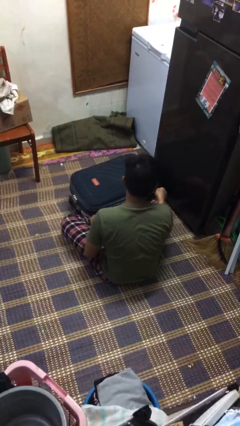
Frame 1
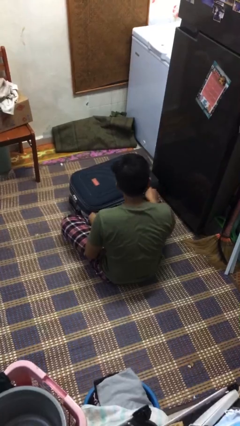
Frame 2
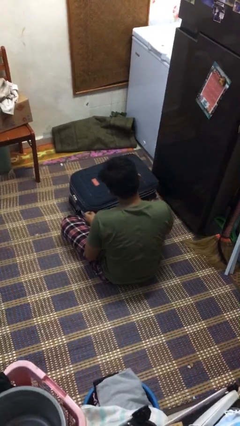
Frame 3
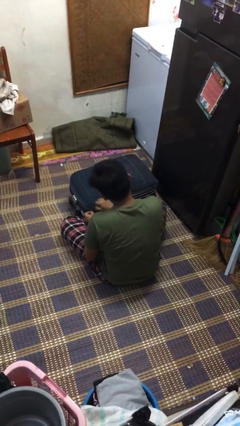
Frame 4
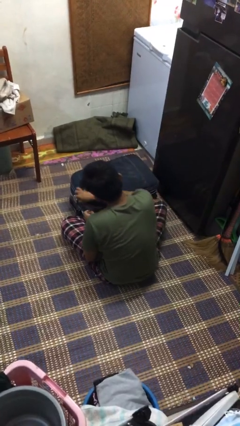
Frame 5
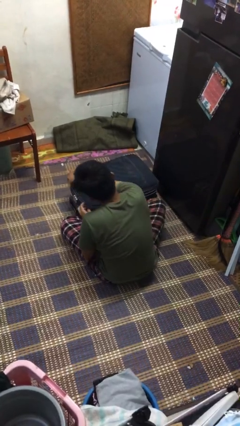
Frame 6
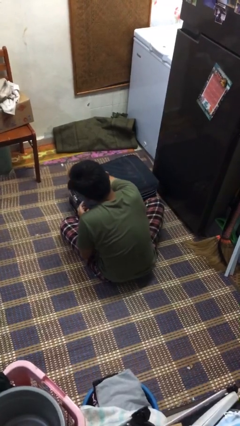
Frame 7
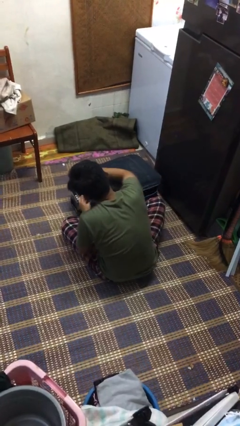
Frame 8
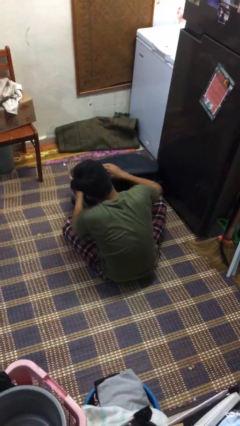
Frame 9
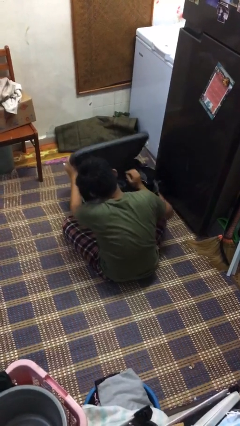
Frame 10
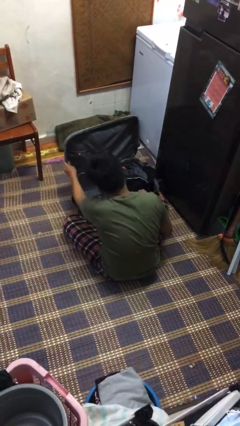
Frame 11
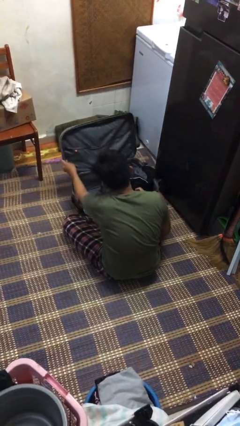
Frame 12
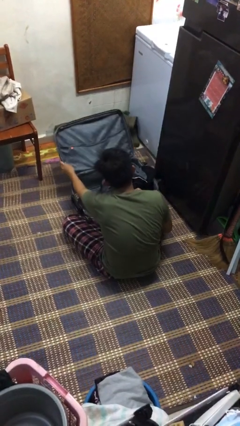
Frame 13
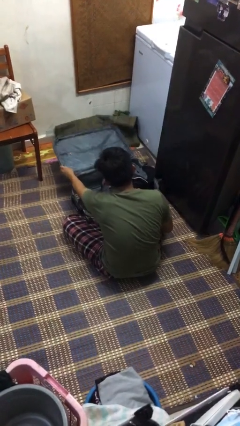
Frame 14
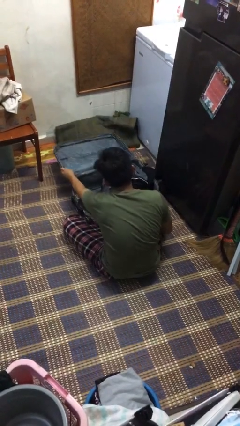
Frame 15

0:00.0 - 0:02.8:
person opens suitcase

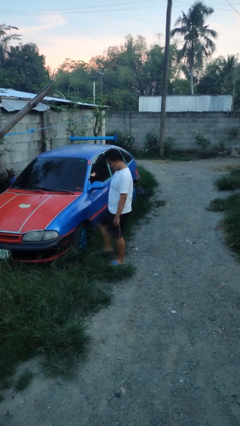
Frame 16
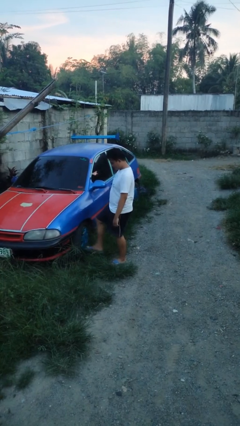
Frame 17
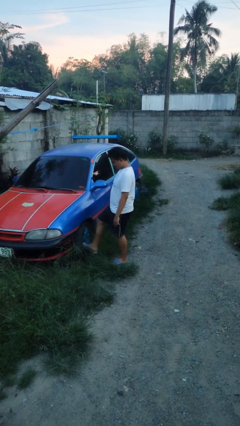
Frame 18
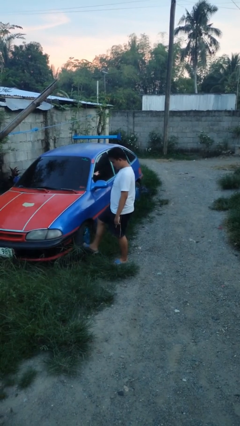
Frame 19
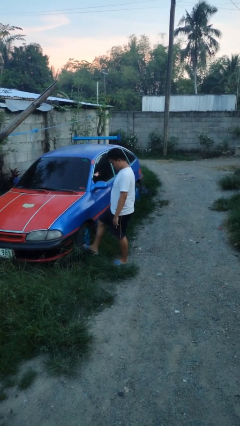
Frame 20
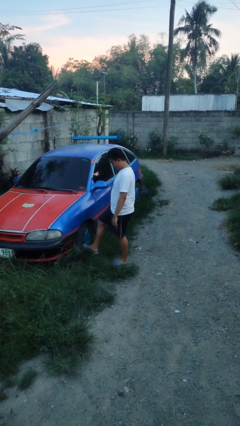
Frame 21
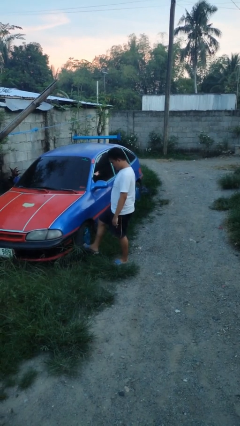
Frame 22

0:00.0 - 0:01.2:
person kicks car tires

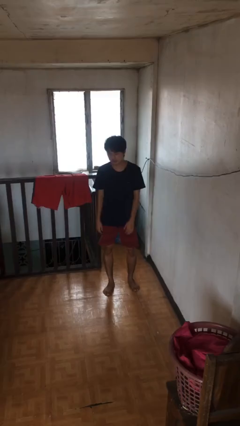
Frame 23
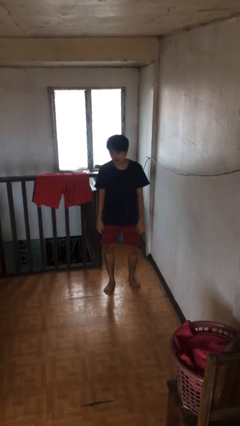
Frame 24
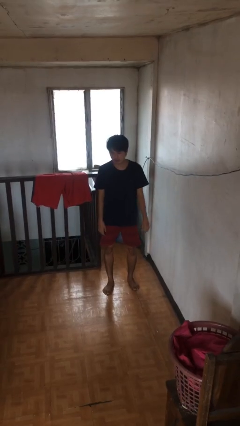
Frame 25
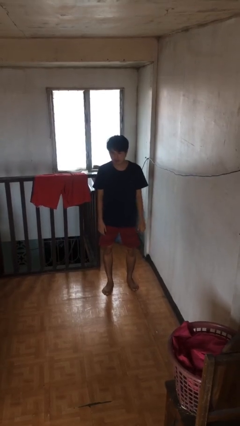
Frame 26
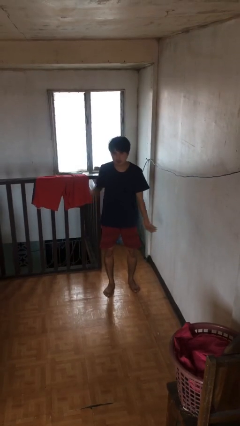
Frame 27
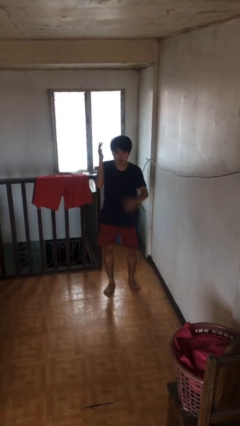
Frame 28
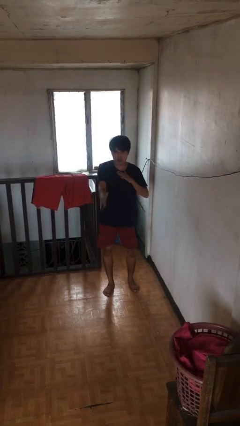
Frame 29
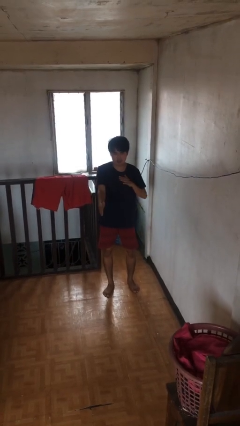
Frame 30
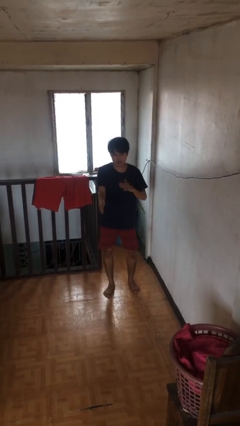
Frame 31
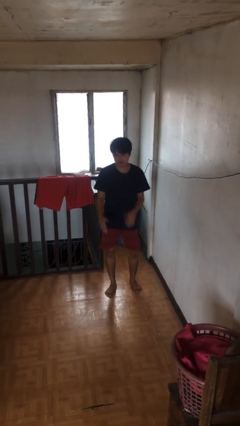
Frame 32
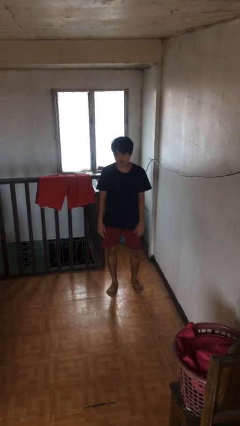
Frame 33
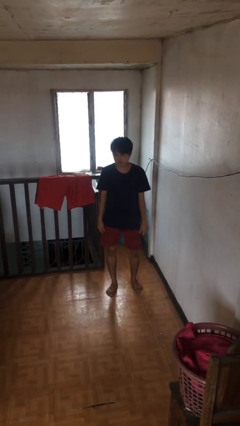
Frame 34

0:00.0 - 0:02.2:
person karate chop

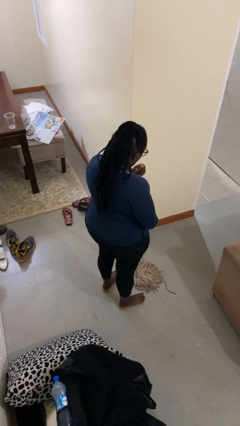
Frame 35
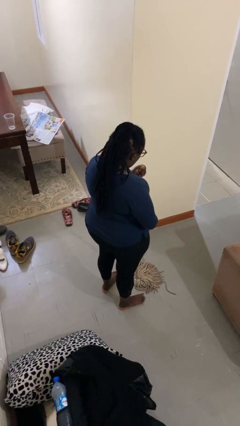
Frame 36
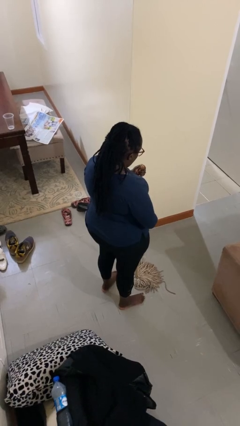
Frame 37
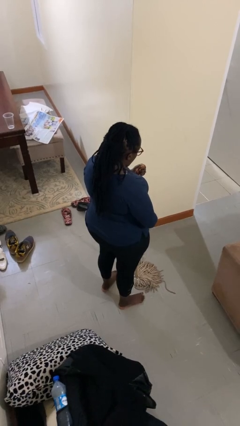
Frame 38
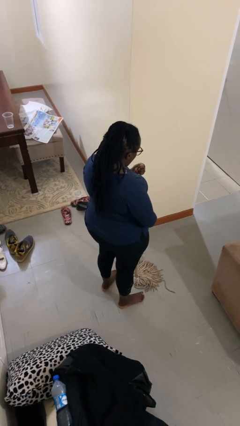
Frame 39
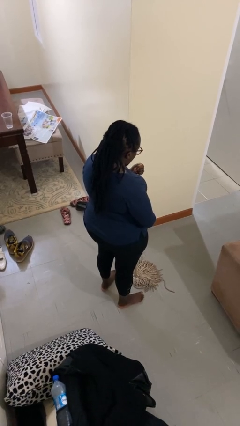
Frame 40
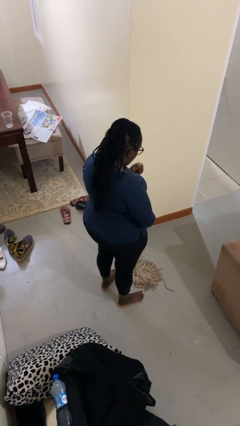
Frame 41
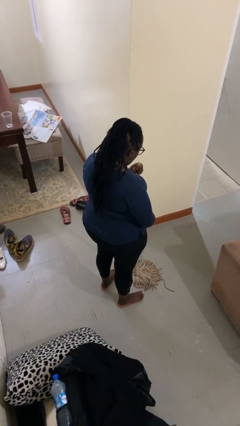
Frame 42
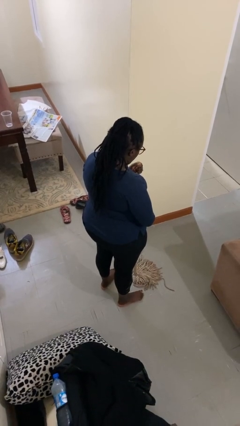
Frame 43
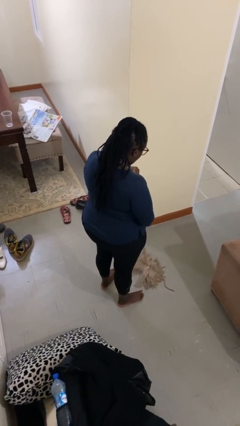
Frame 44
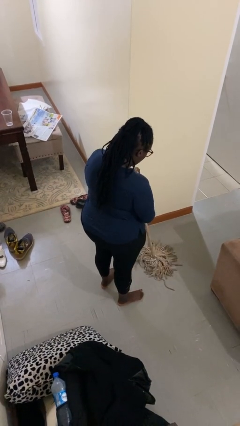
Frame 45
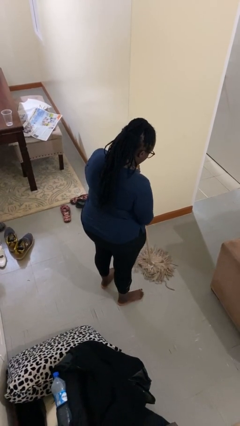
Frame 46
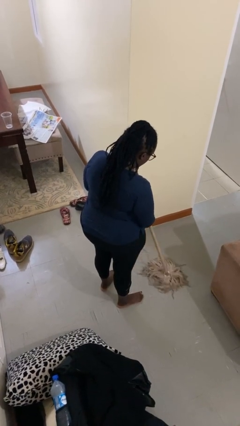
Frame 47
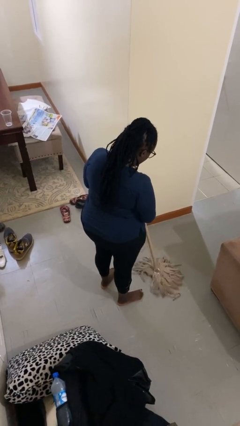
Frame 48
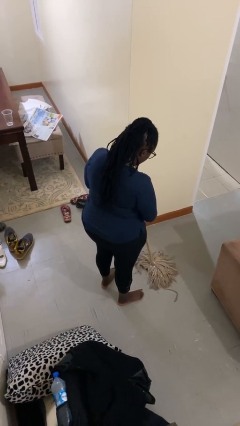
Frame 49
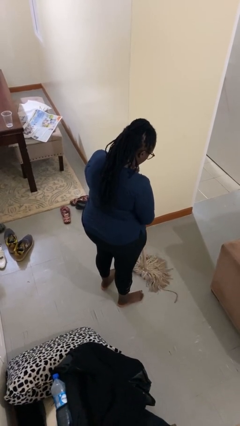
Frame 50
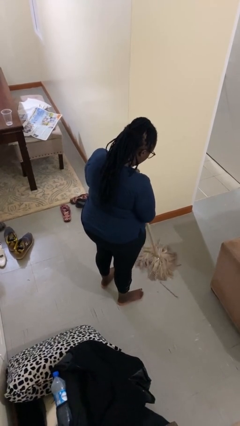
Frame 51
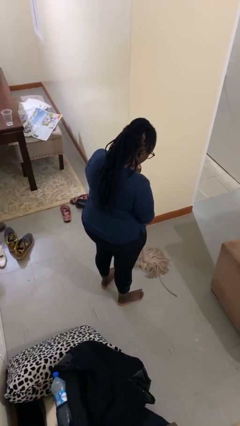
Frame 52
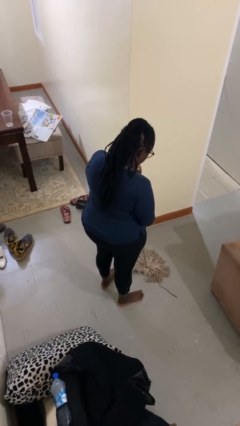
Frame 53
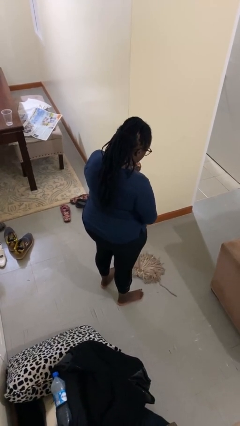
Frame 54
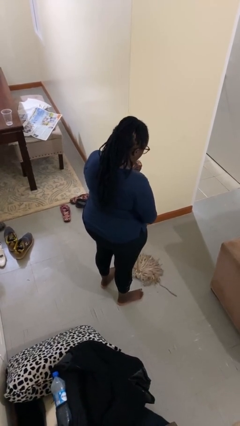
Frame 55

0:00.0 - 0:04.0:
person mops

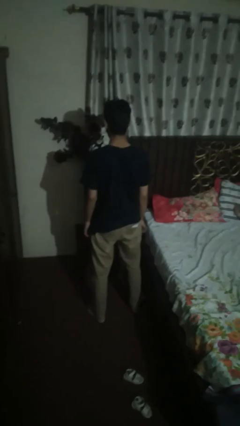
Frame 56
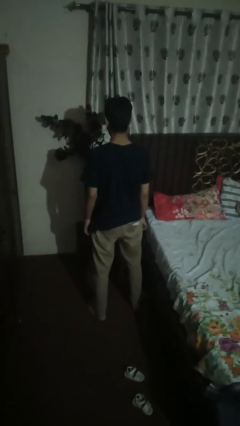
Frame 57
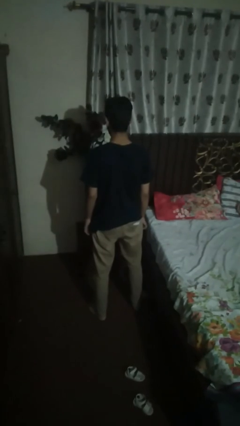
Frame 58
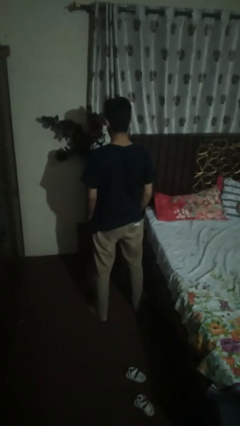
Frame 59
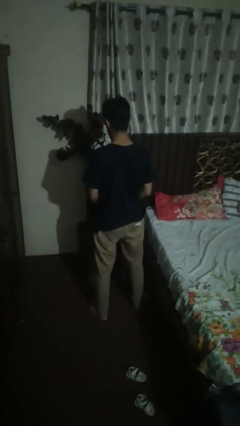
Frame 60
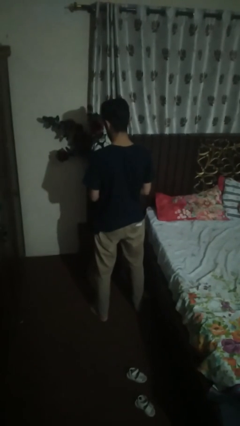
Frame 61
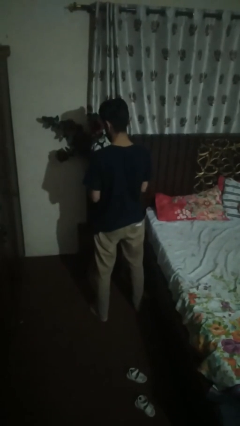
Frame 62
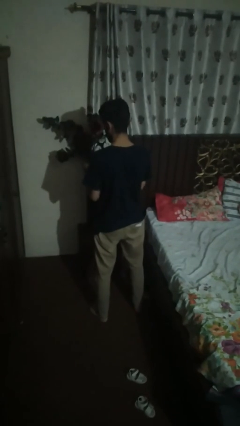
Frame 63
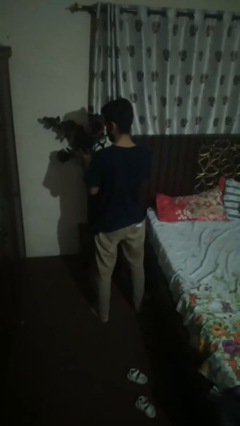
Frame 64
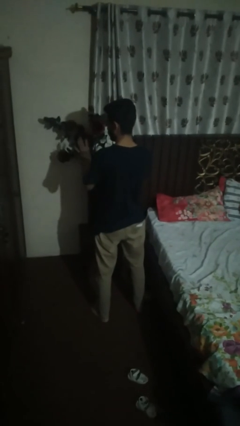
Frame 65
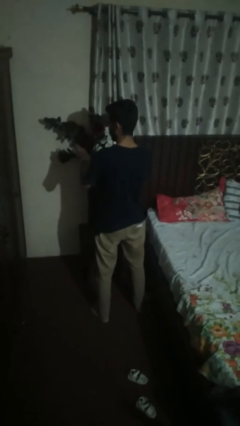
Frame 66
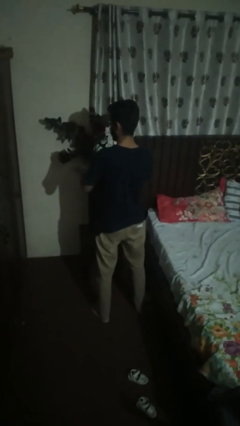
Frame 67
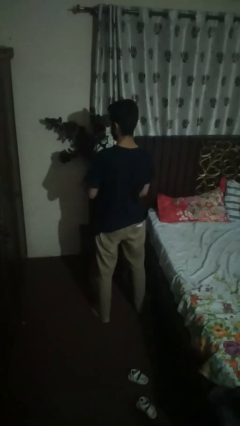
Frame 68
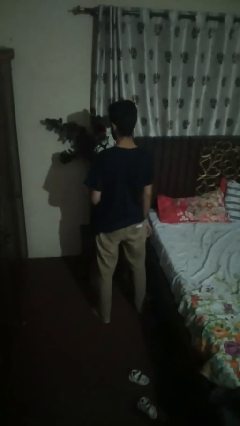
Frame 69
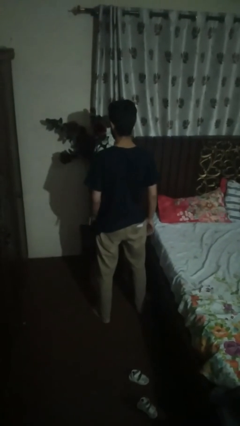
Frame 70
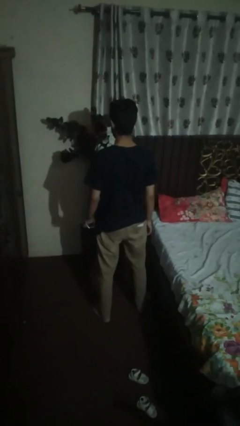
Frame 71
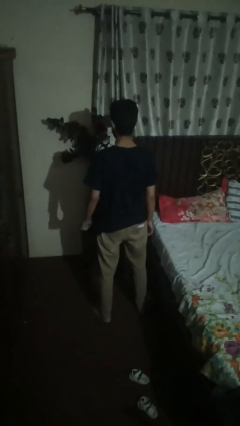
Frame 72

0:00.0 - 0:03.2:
person puts on wristwatch

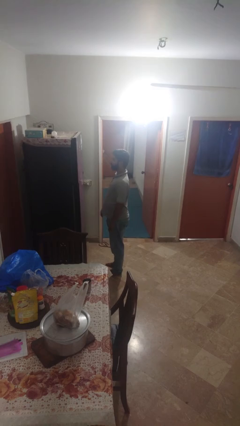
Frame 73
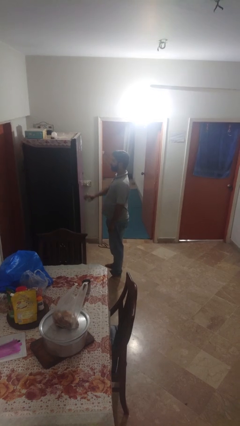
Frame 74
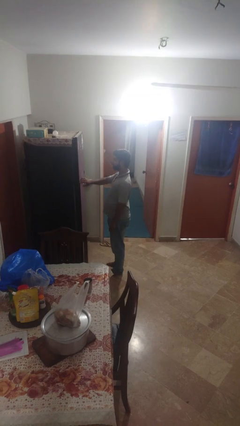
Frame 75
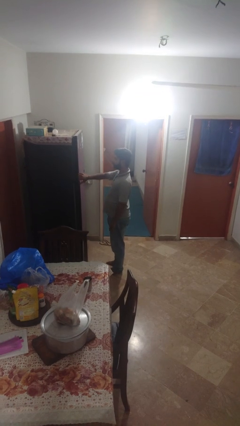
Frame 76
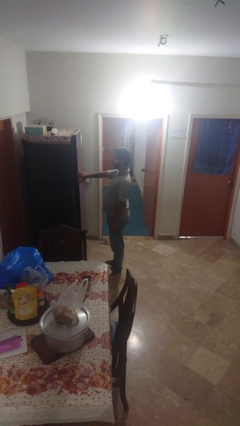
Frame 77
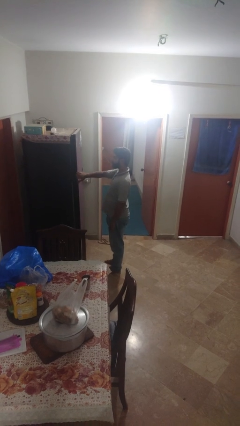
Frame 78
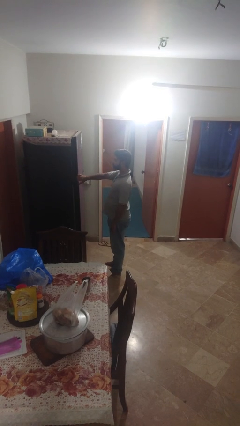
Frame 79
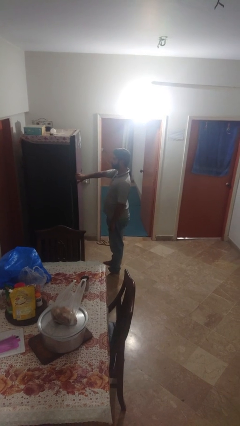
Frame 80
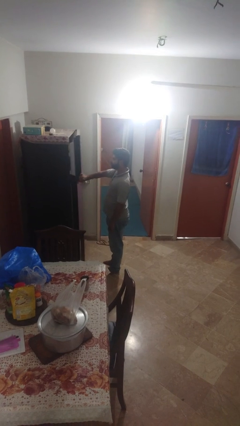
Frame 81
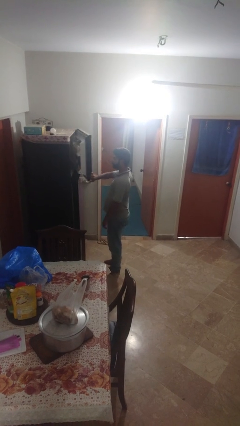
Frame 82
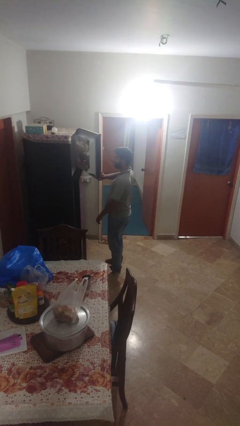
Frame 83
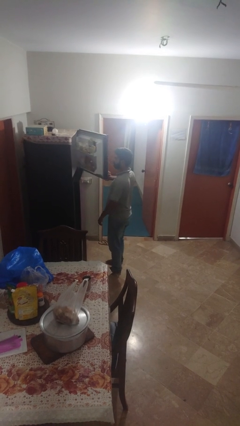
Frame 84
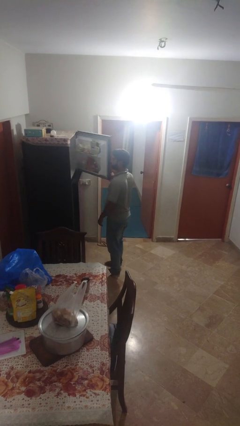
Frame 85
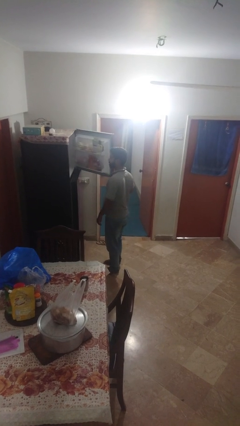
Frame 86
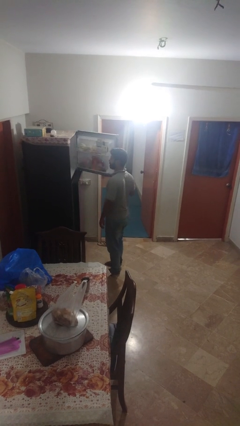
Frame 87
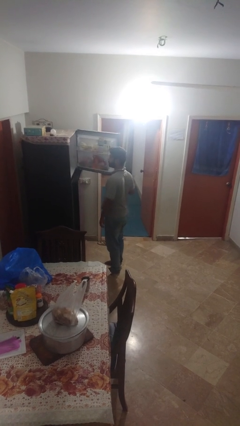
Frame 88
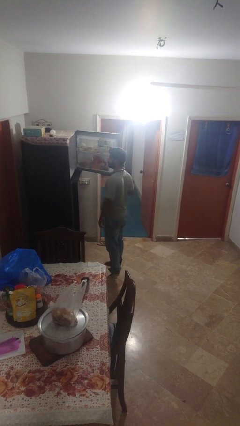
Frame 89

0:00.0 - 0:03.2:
person opens refrigerator

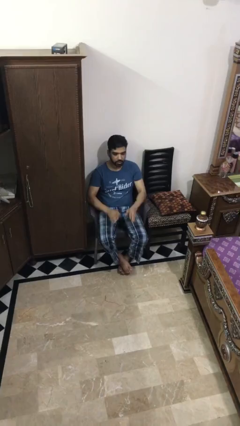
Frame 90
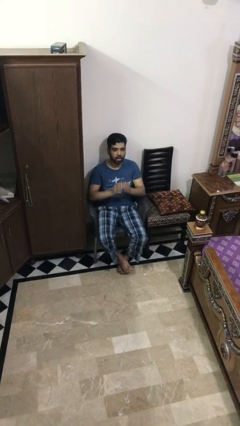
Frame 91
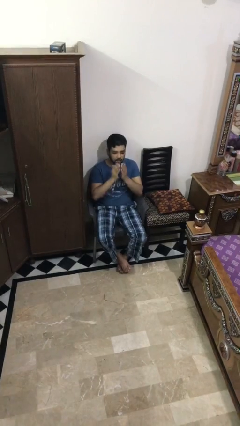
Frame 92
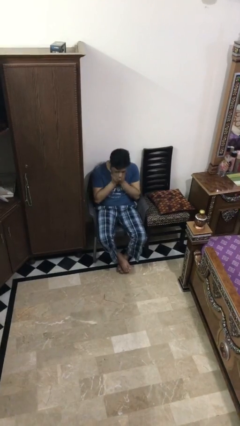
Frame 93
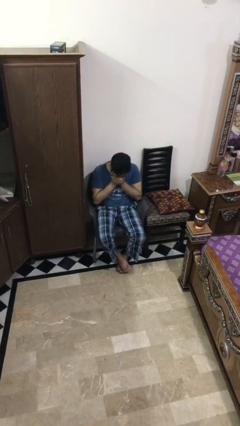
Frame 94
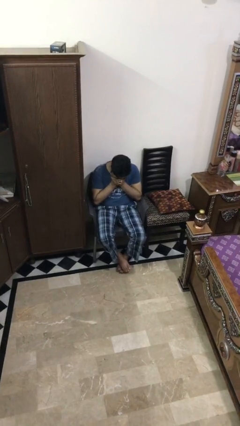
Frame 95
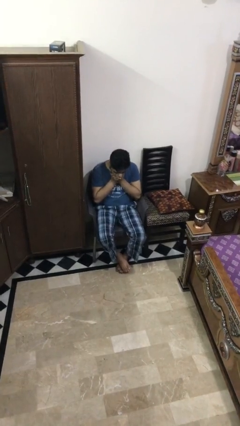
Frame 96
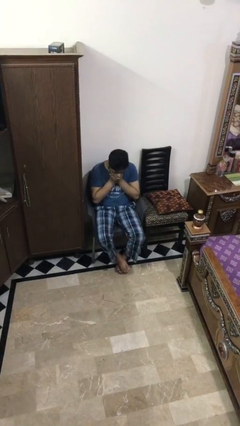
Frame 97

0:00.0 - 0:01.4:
person sneezes into hand
